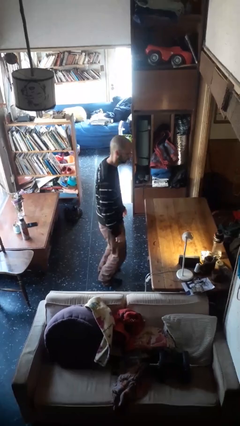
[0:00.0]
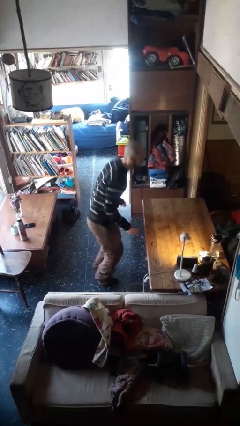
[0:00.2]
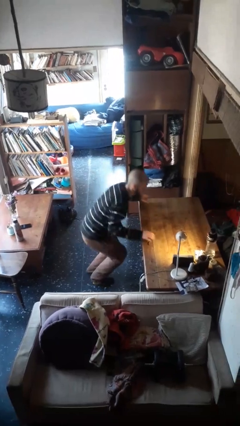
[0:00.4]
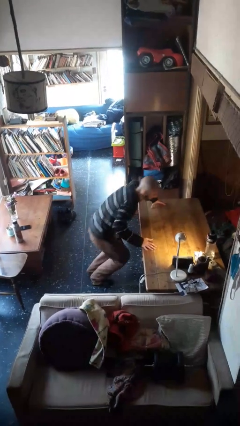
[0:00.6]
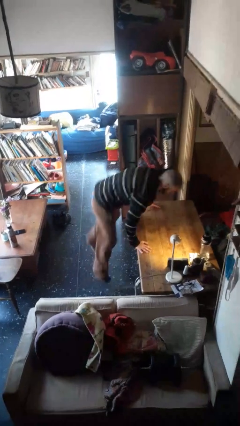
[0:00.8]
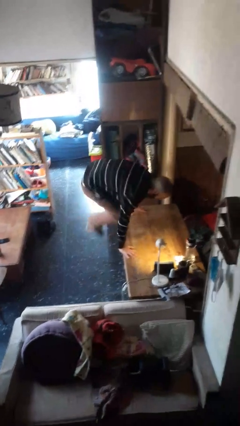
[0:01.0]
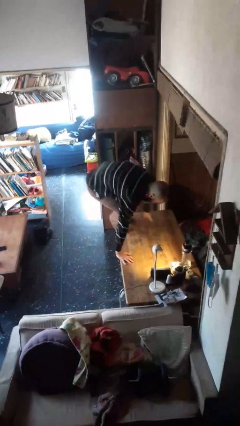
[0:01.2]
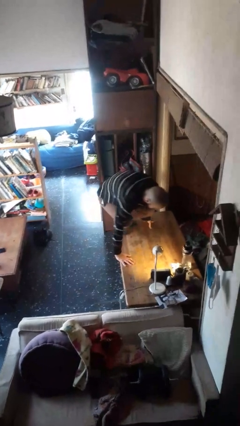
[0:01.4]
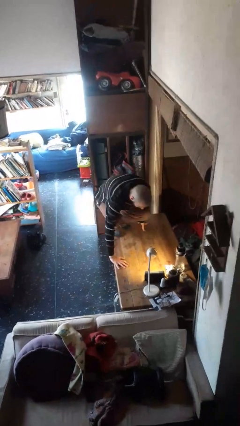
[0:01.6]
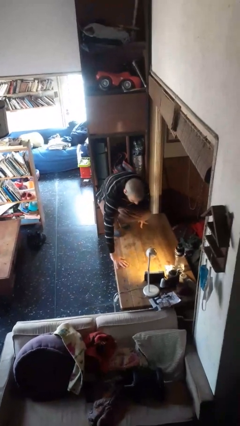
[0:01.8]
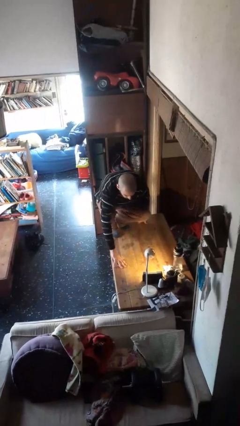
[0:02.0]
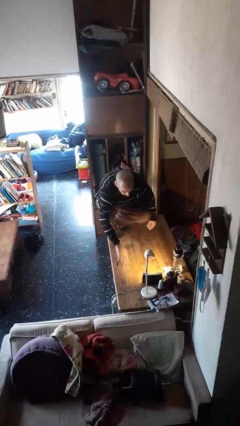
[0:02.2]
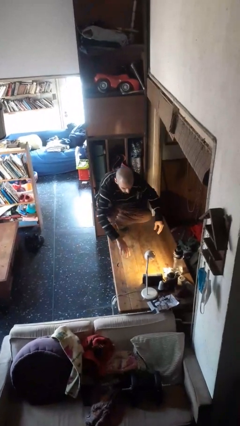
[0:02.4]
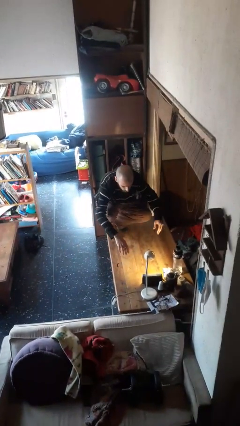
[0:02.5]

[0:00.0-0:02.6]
person climbs on table

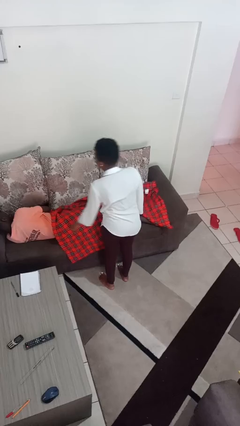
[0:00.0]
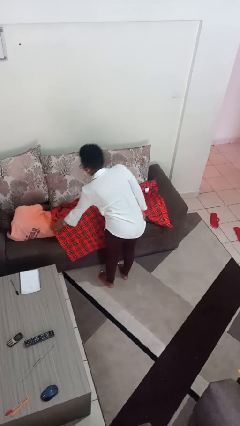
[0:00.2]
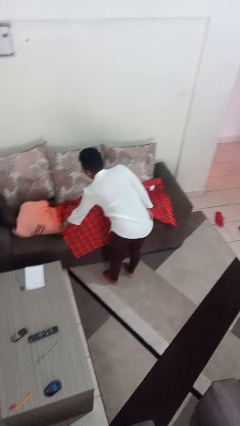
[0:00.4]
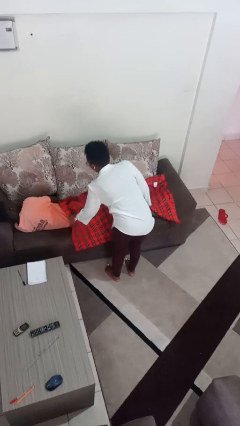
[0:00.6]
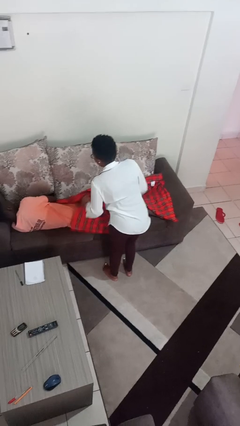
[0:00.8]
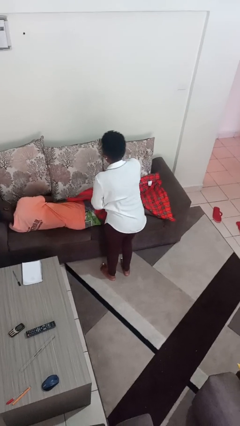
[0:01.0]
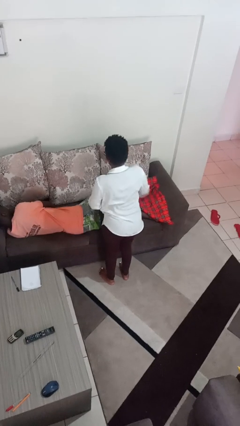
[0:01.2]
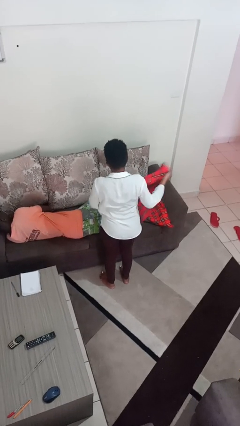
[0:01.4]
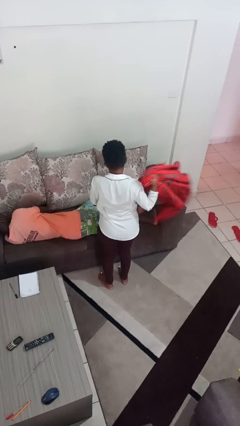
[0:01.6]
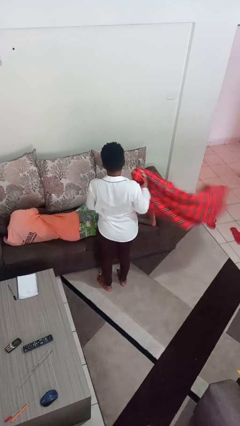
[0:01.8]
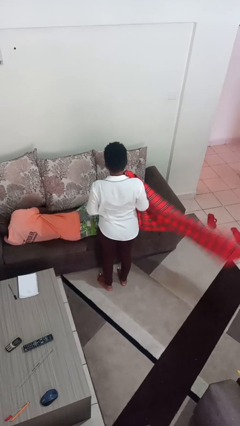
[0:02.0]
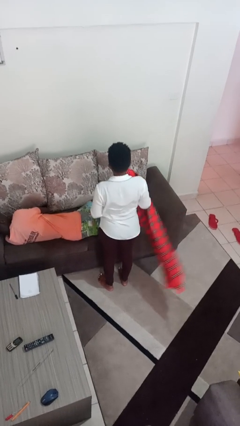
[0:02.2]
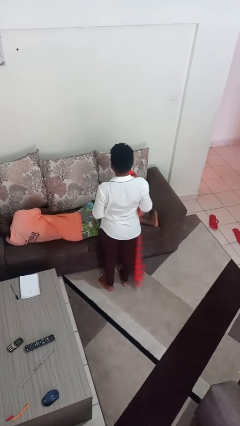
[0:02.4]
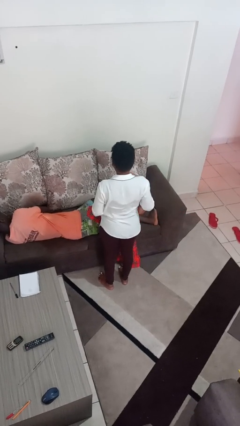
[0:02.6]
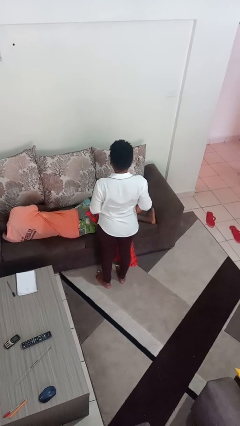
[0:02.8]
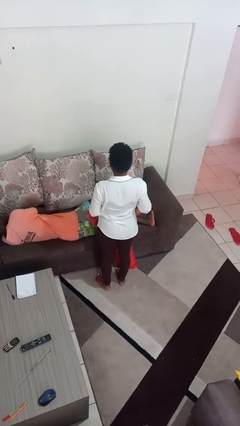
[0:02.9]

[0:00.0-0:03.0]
person uncovers friend with blanket

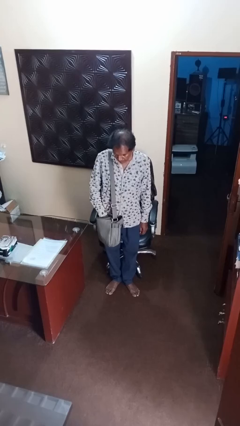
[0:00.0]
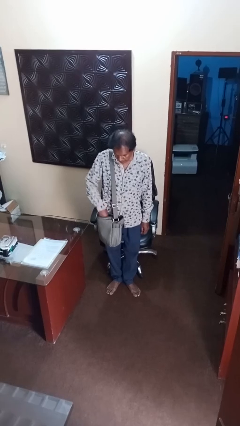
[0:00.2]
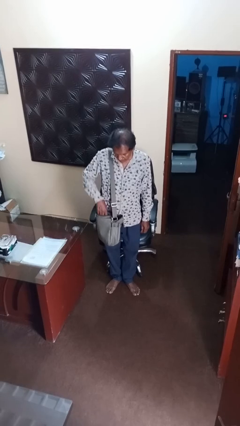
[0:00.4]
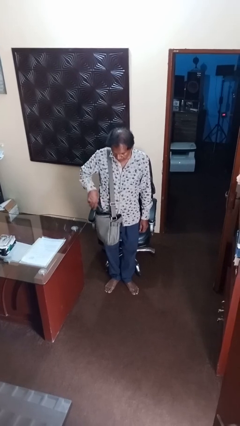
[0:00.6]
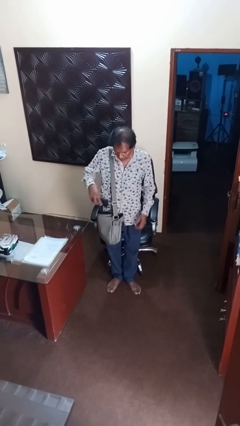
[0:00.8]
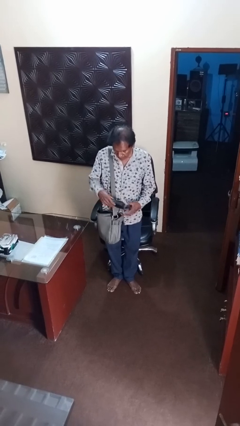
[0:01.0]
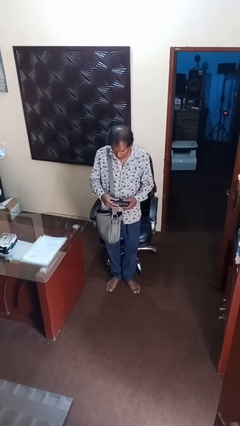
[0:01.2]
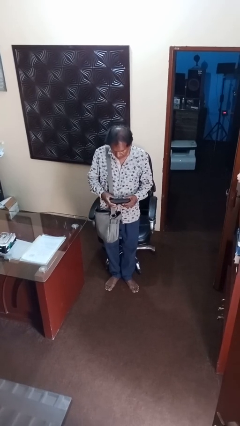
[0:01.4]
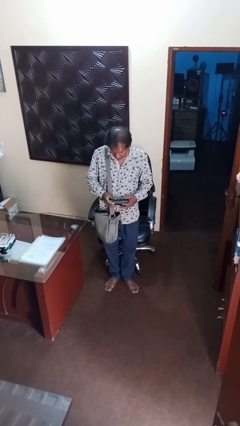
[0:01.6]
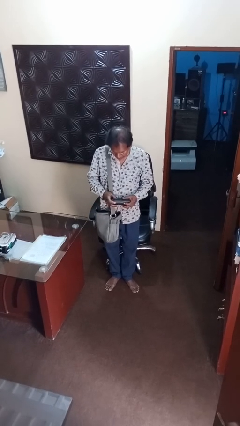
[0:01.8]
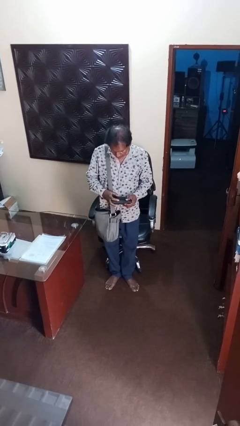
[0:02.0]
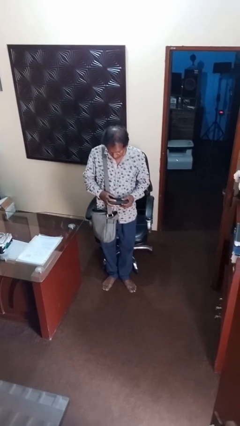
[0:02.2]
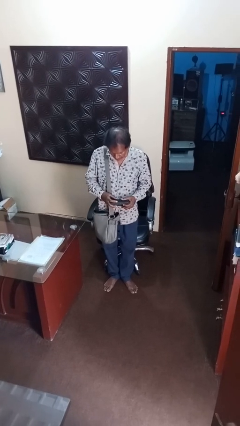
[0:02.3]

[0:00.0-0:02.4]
person takes object from backpack

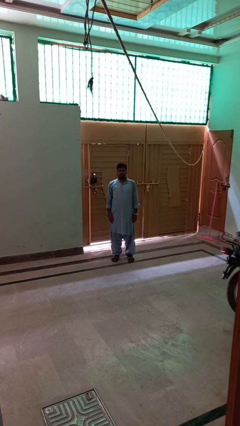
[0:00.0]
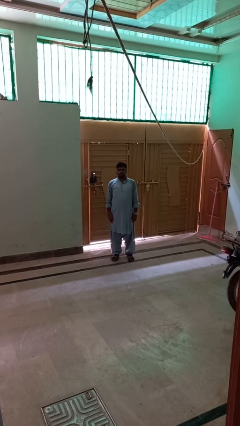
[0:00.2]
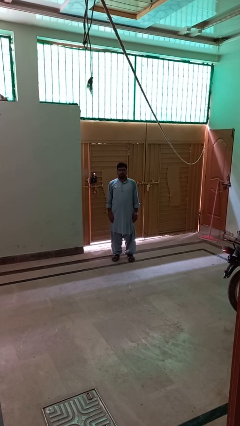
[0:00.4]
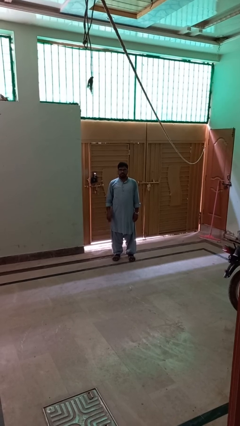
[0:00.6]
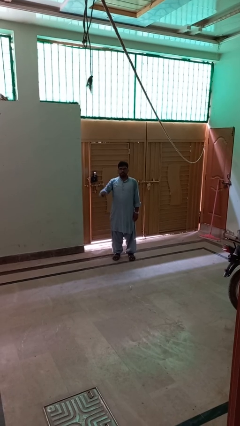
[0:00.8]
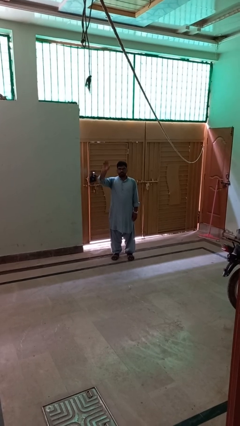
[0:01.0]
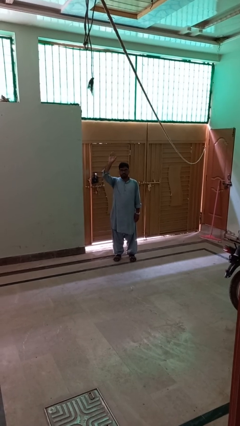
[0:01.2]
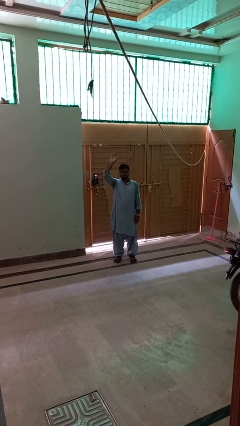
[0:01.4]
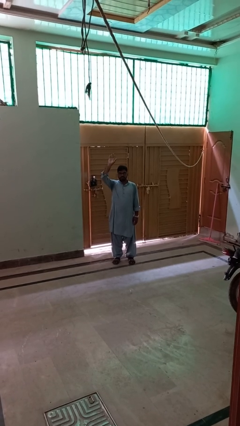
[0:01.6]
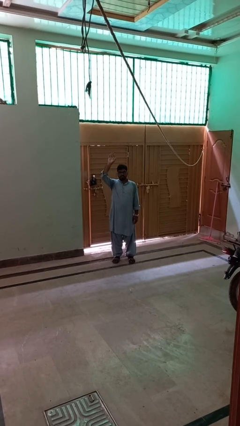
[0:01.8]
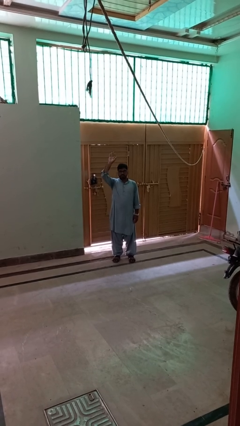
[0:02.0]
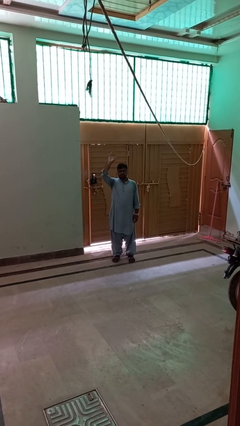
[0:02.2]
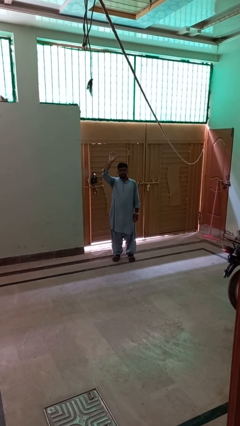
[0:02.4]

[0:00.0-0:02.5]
person gestures raise hand

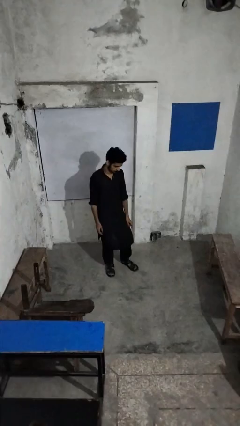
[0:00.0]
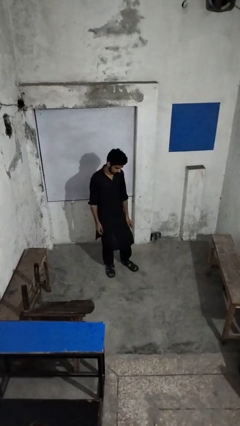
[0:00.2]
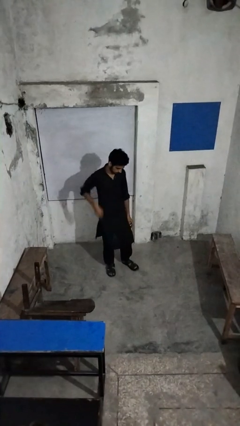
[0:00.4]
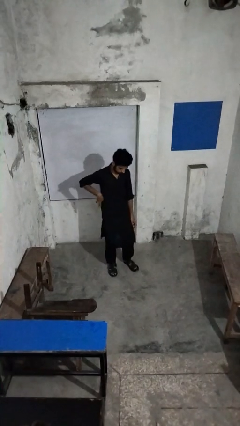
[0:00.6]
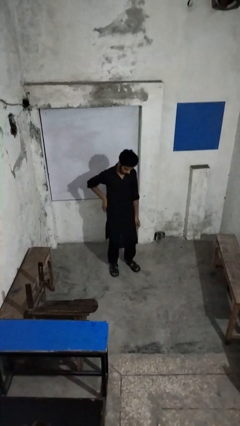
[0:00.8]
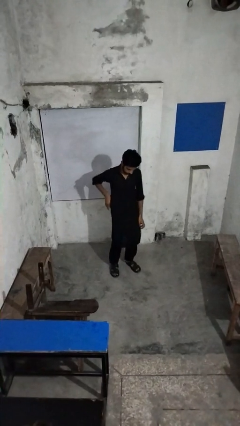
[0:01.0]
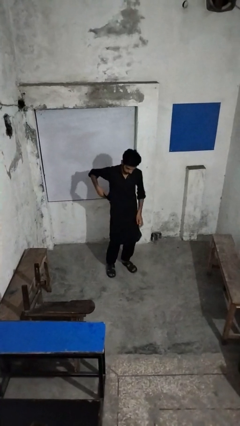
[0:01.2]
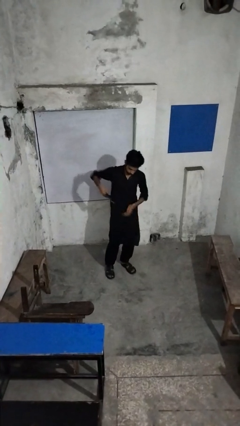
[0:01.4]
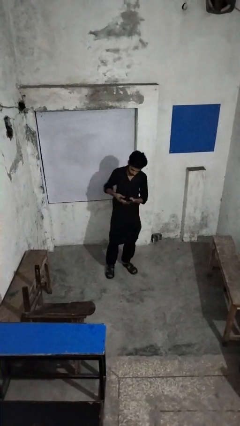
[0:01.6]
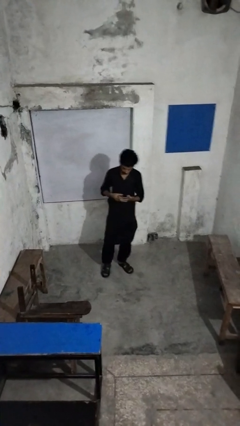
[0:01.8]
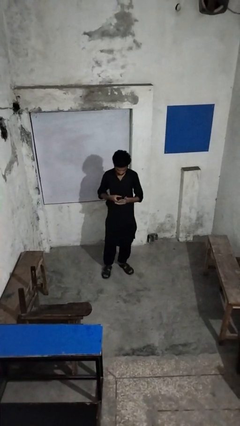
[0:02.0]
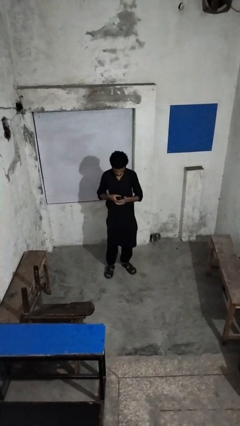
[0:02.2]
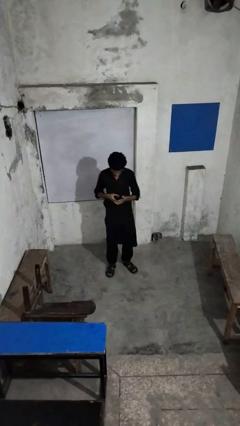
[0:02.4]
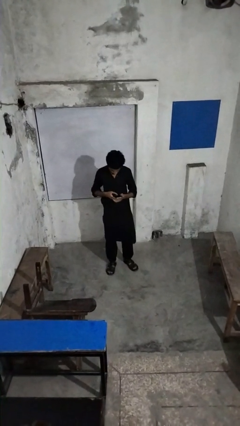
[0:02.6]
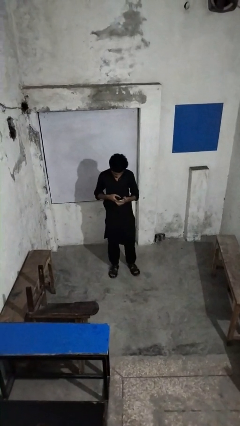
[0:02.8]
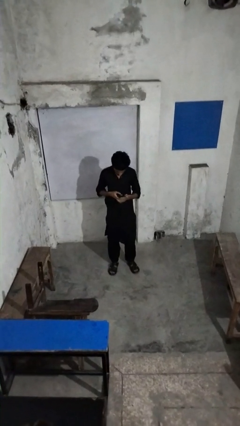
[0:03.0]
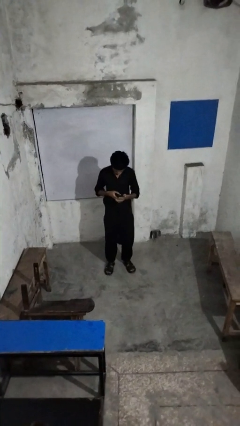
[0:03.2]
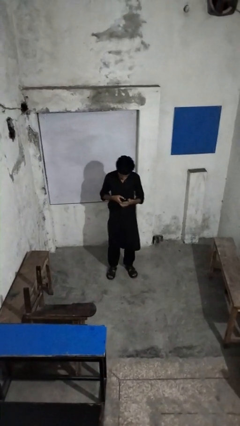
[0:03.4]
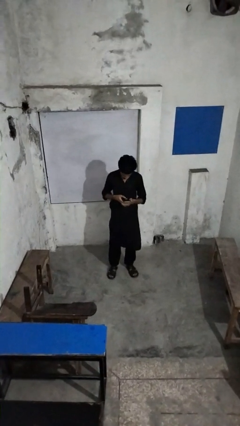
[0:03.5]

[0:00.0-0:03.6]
person takes phone from pocket

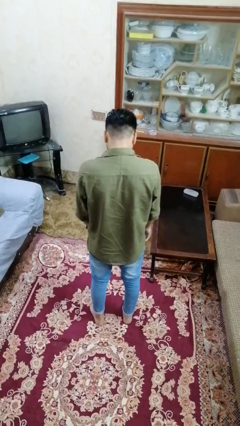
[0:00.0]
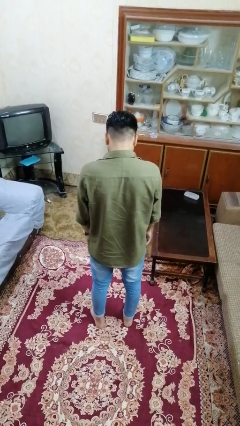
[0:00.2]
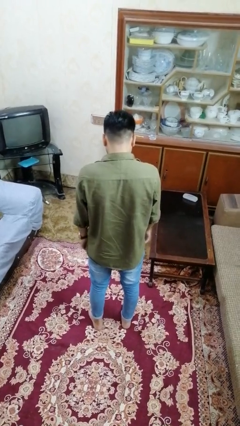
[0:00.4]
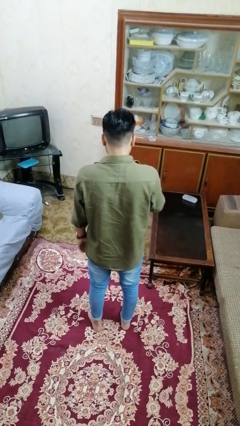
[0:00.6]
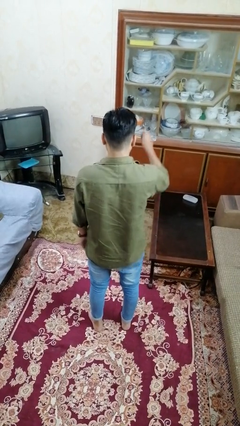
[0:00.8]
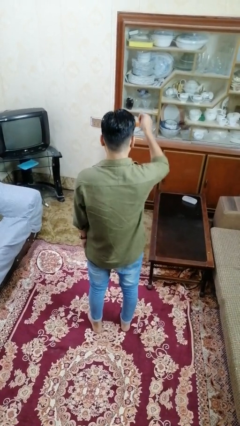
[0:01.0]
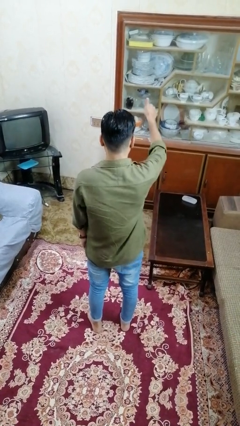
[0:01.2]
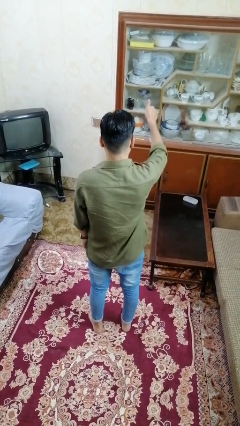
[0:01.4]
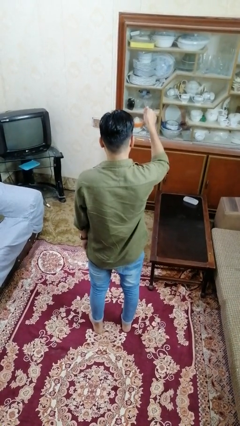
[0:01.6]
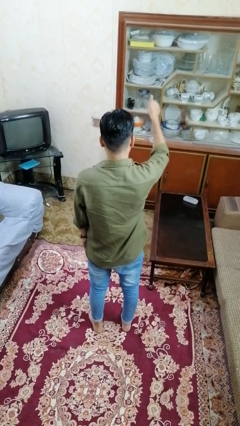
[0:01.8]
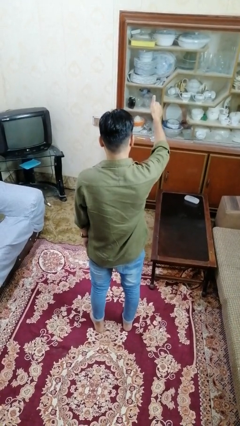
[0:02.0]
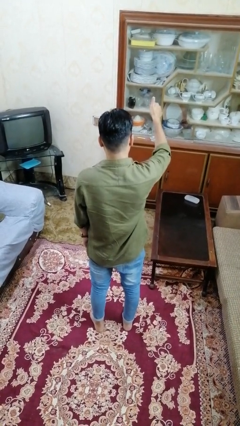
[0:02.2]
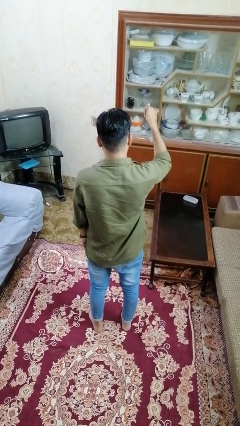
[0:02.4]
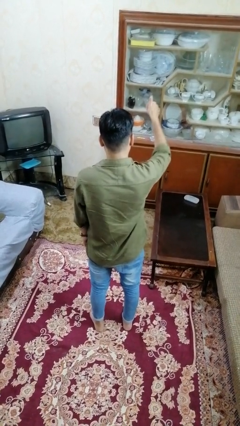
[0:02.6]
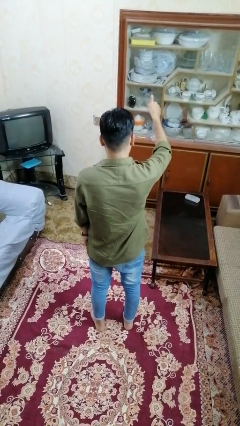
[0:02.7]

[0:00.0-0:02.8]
person gestures thumbs up

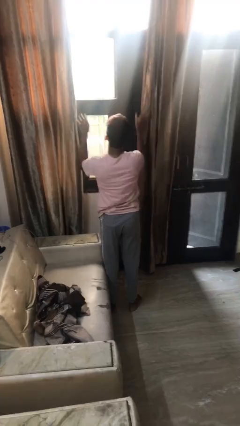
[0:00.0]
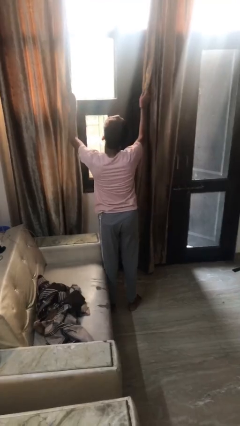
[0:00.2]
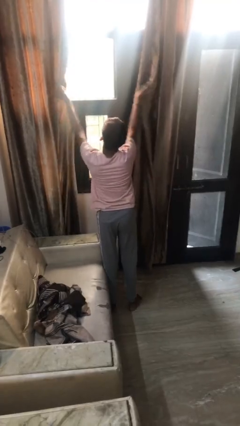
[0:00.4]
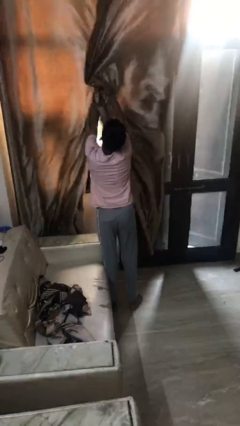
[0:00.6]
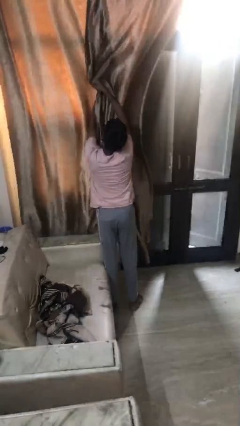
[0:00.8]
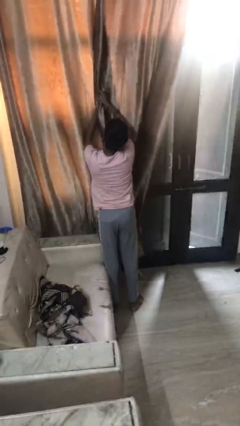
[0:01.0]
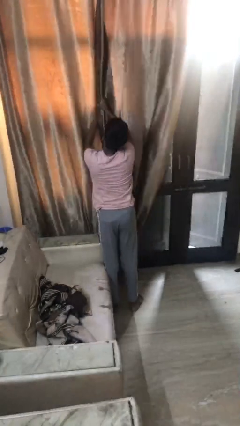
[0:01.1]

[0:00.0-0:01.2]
person closes curtains
